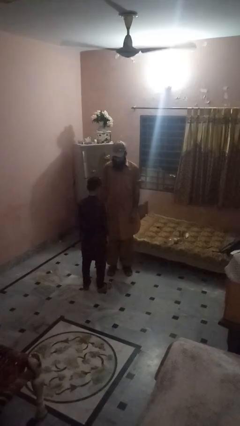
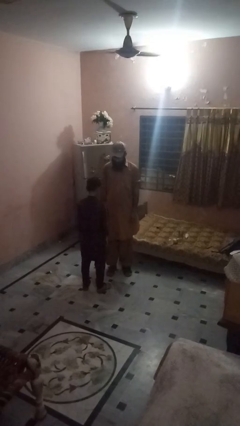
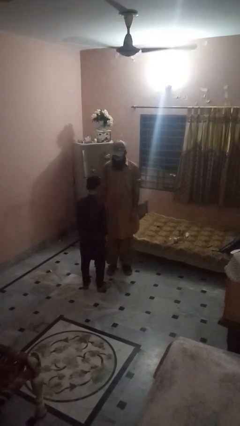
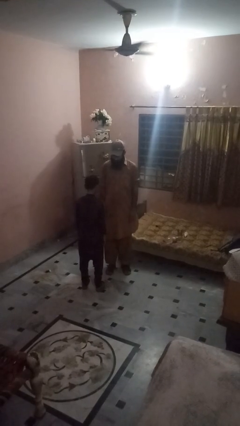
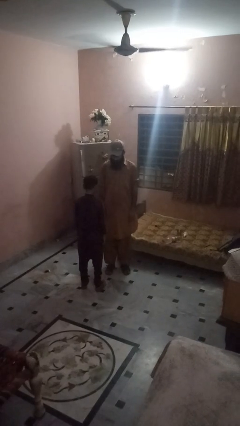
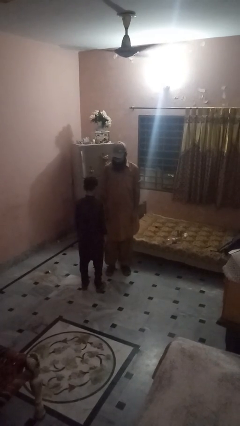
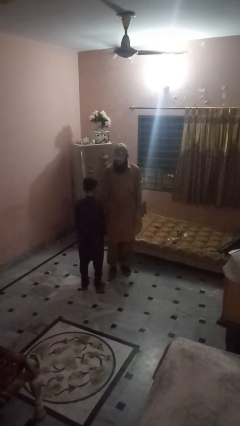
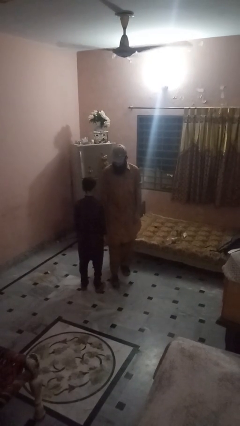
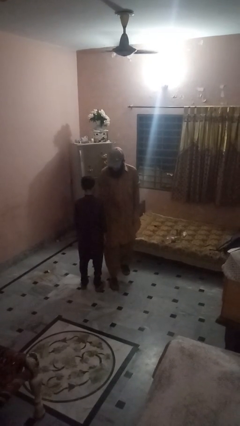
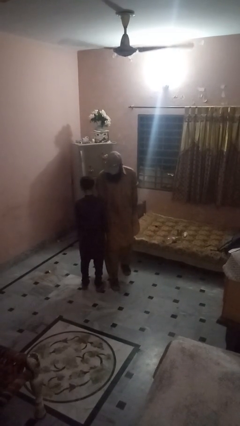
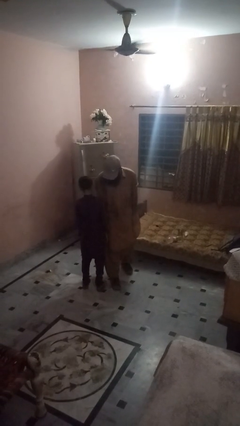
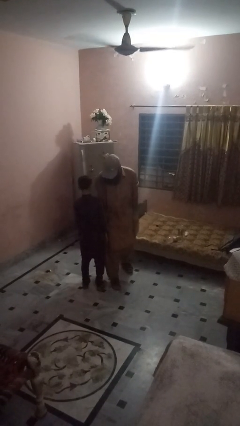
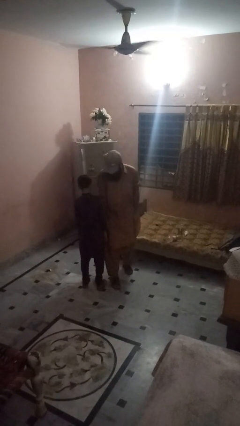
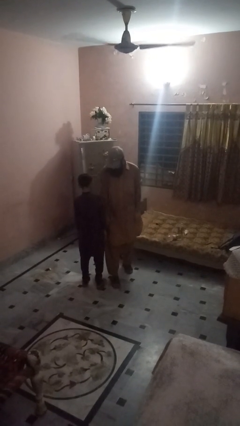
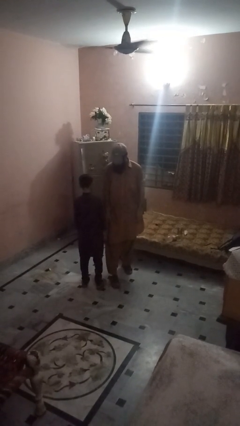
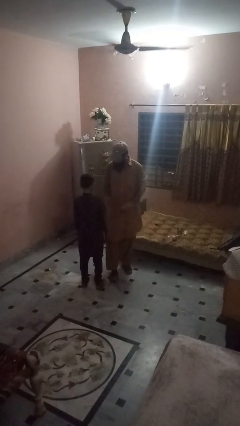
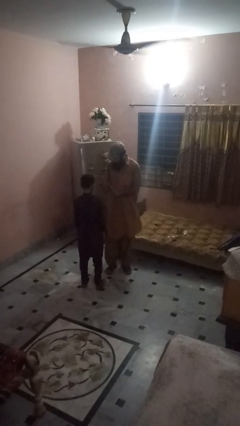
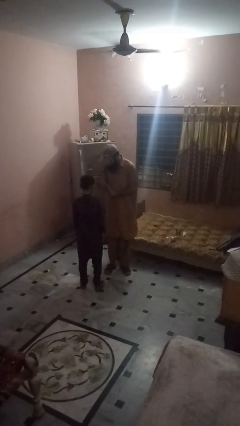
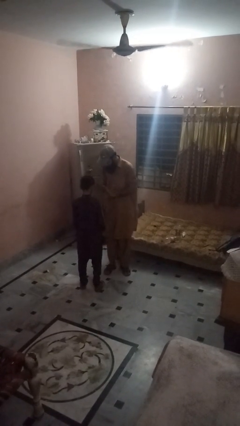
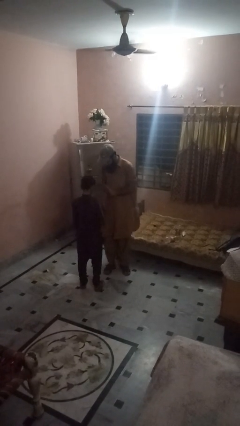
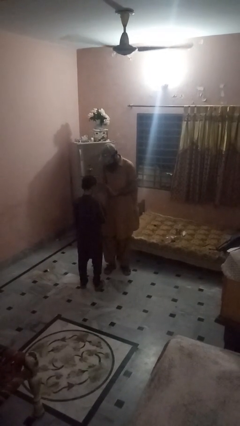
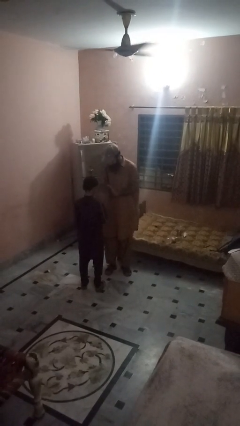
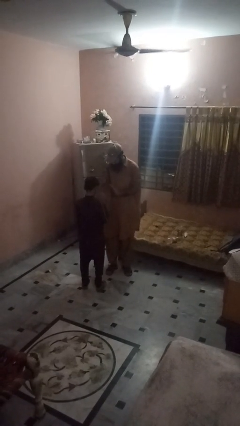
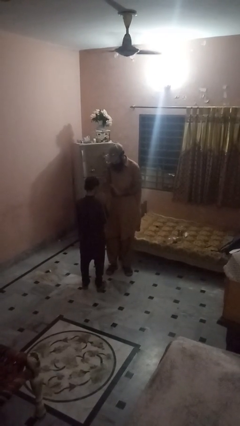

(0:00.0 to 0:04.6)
person bumps into person

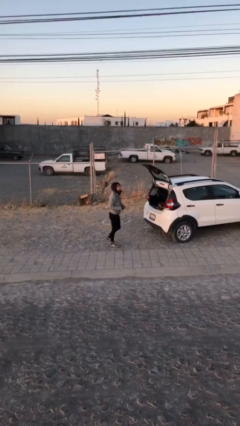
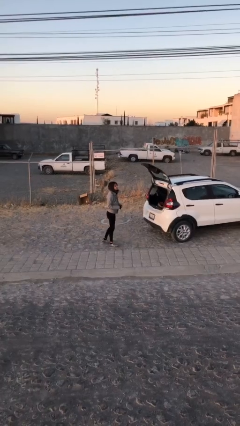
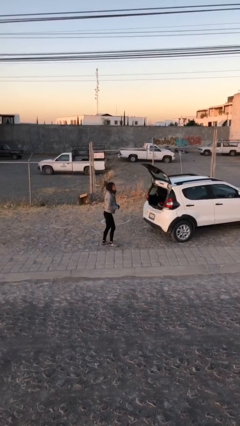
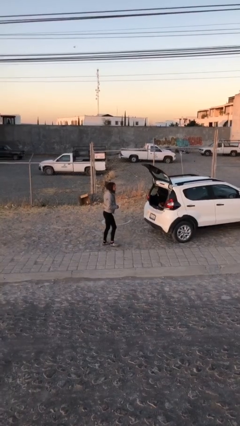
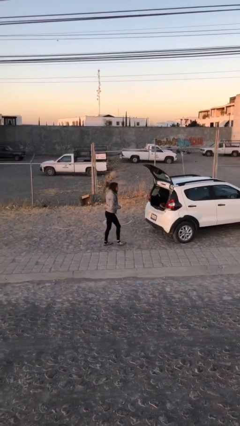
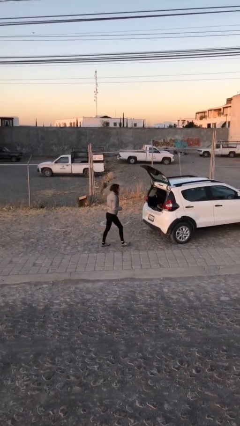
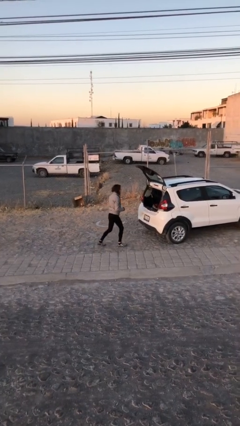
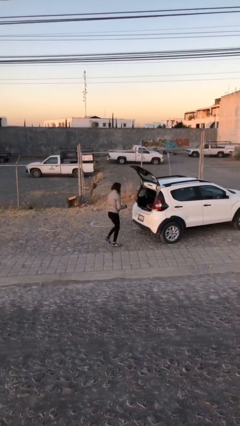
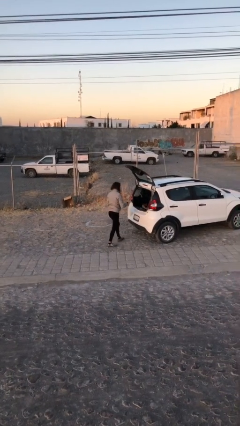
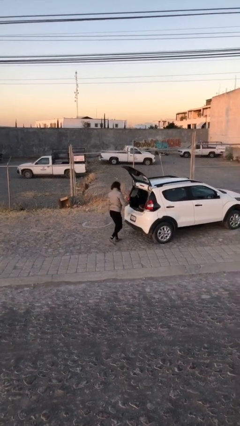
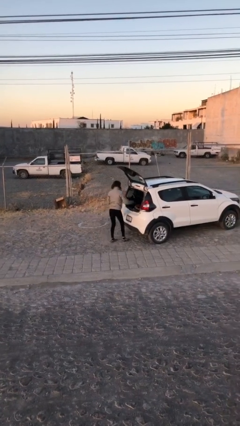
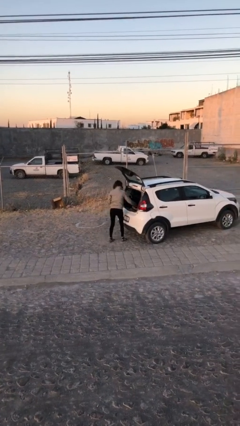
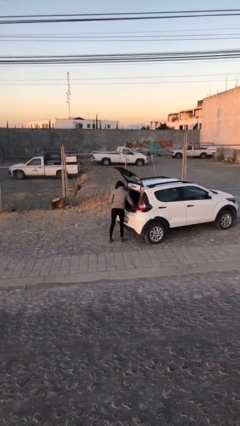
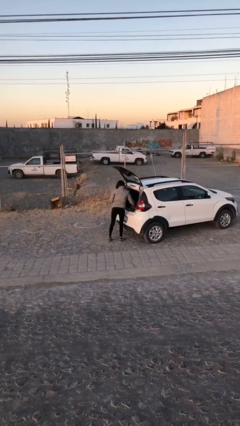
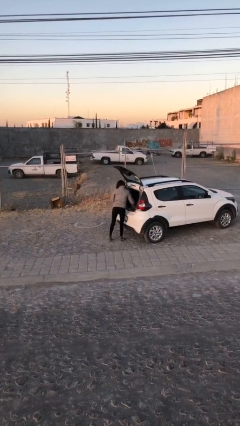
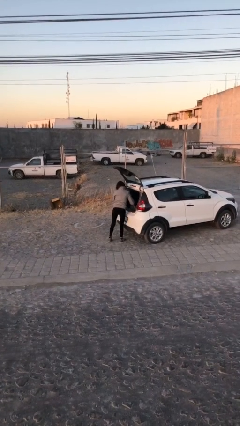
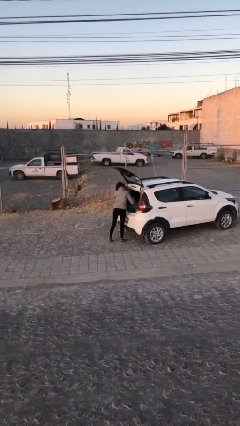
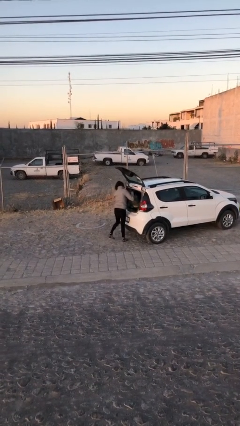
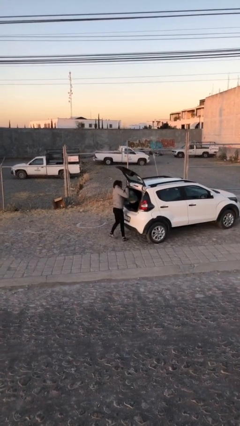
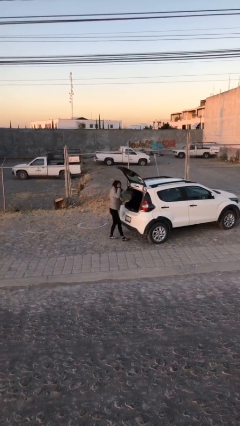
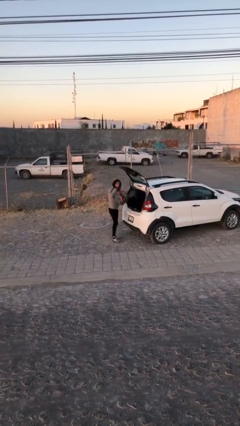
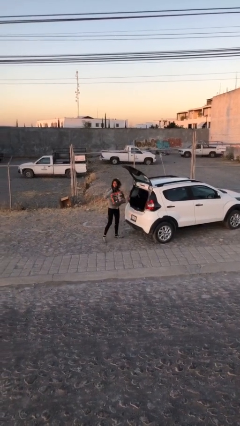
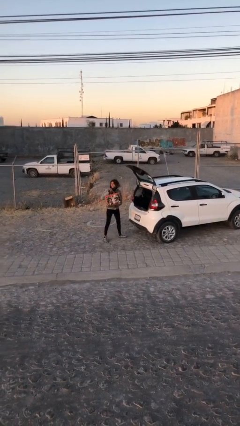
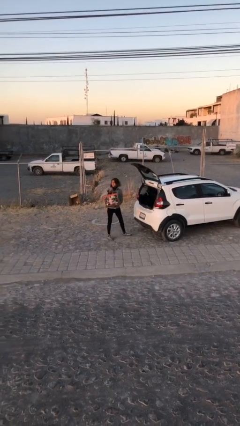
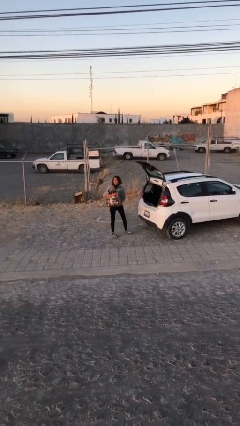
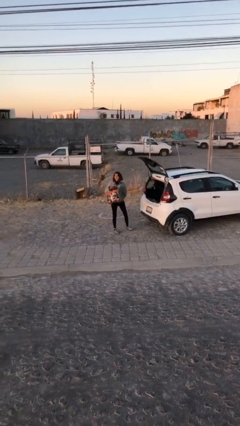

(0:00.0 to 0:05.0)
person unloads car

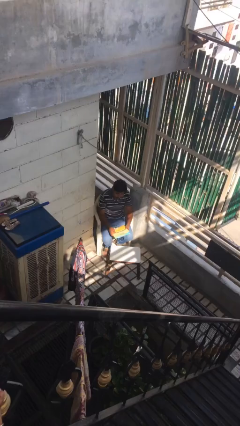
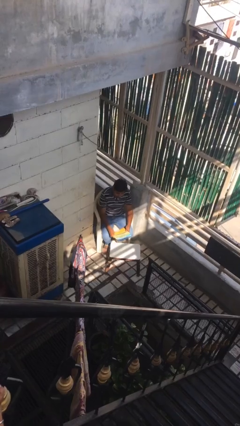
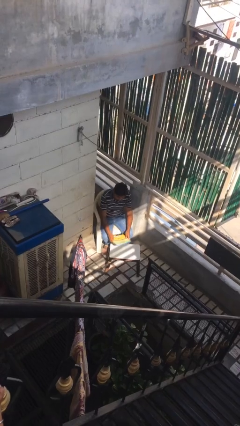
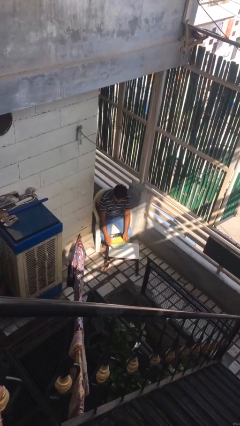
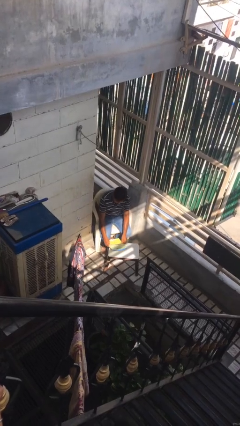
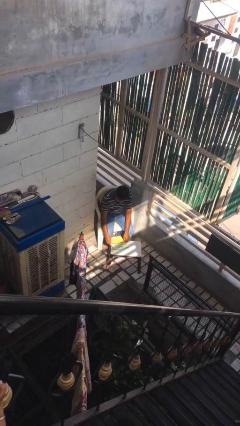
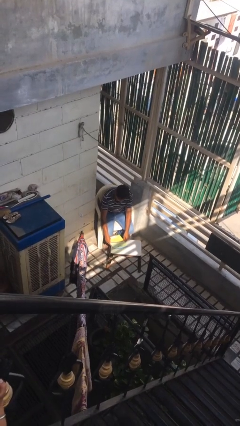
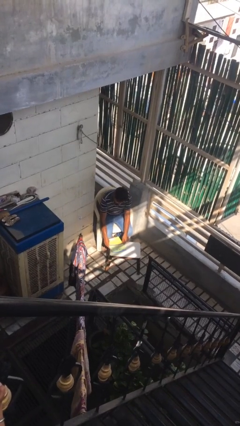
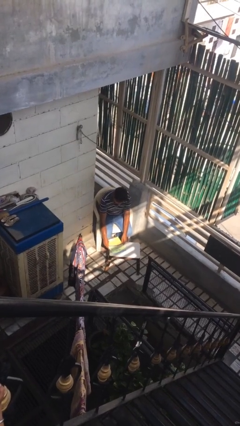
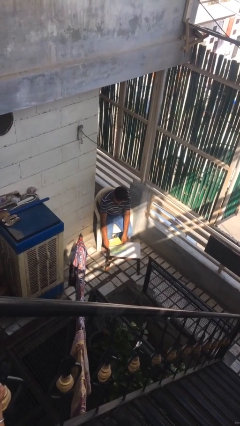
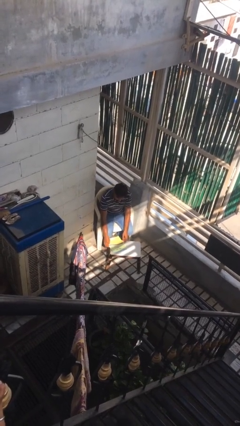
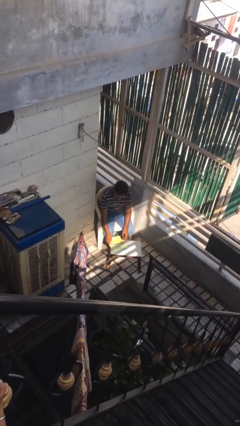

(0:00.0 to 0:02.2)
person puts down object on table

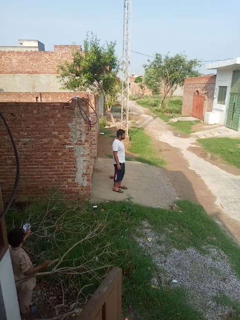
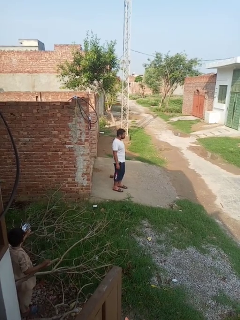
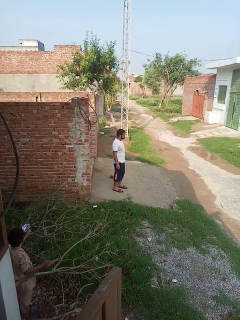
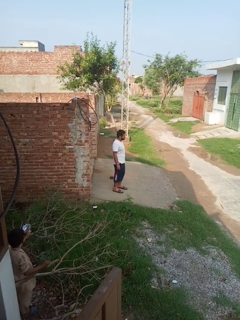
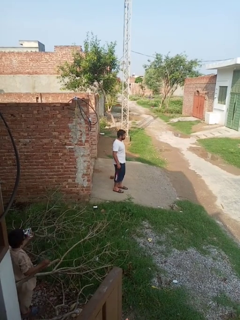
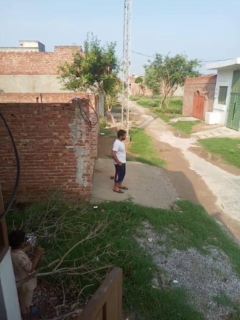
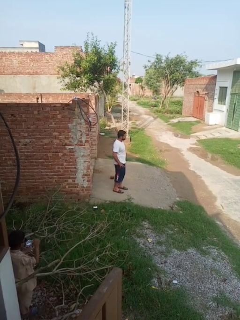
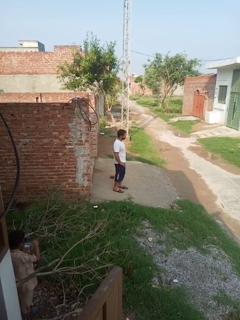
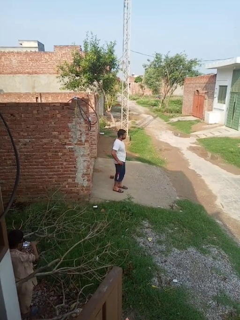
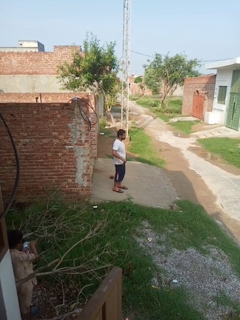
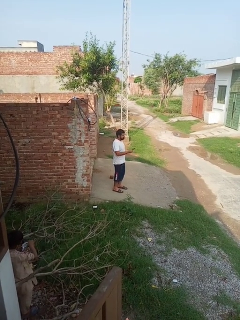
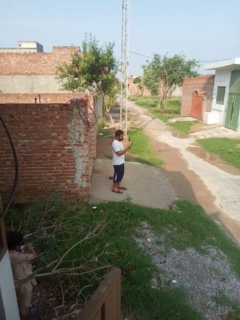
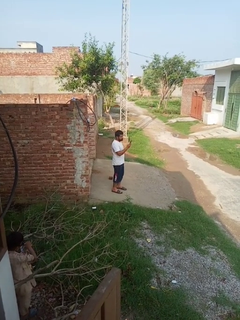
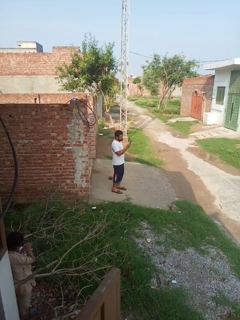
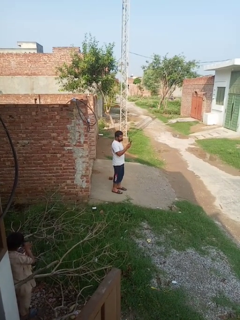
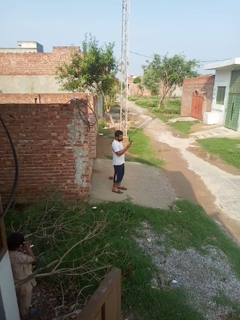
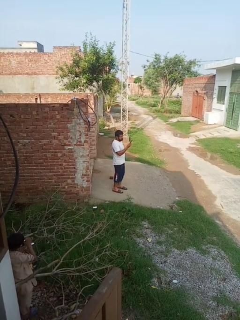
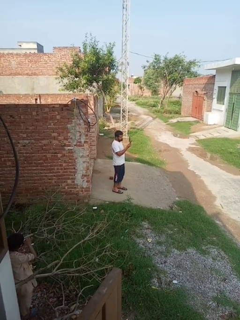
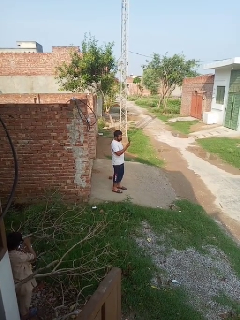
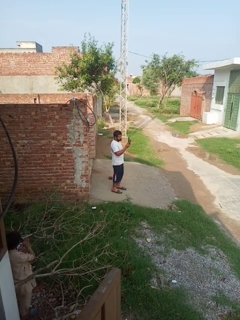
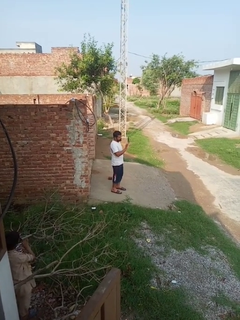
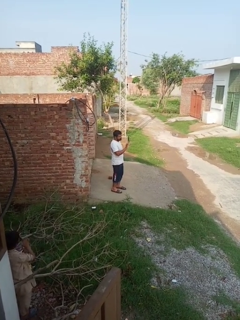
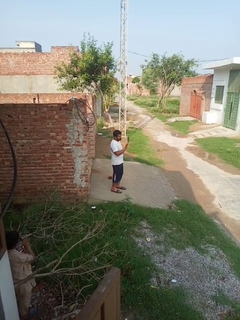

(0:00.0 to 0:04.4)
person takes phone from pocket

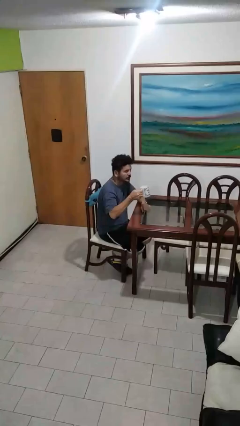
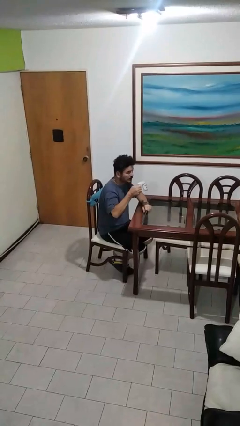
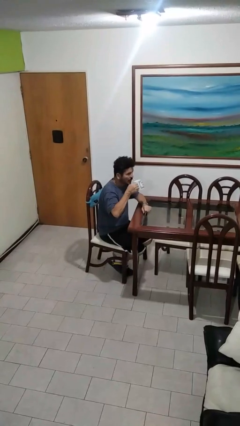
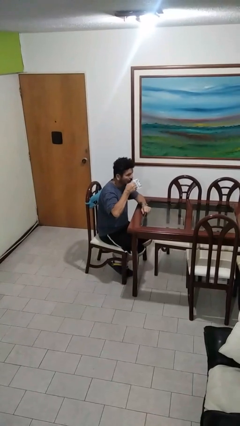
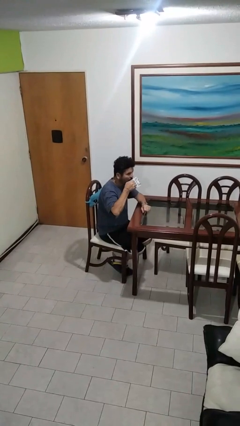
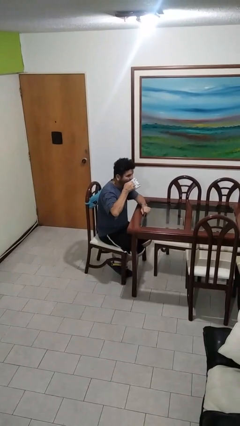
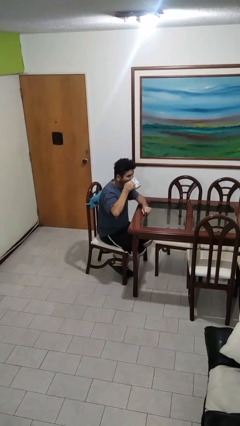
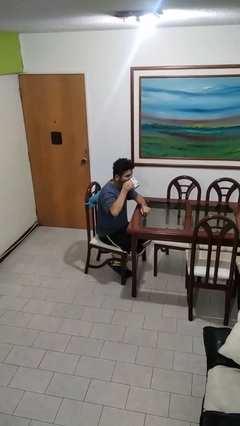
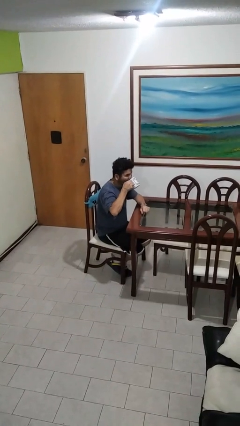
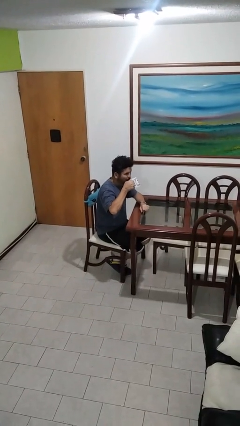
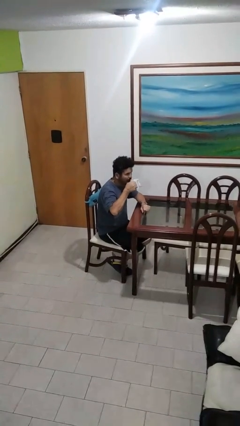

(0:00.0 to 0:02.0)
person drinks from mug
